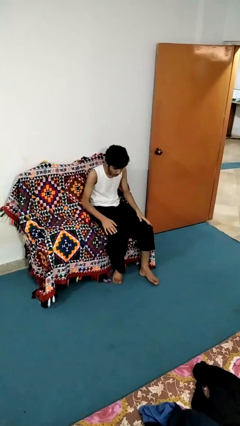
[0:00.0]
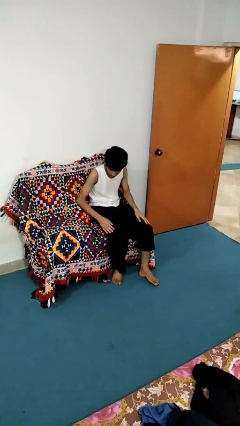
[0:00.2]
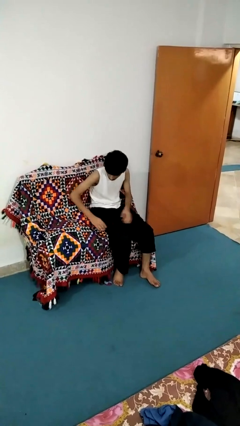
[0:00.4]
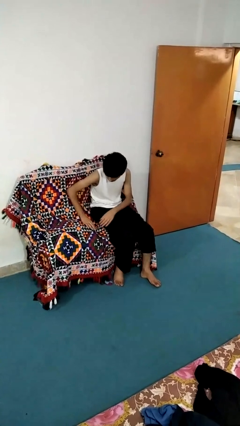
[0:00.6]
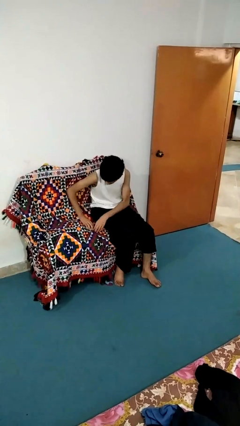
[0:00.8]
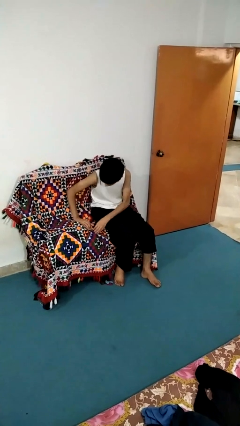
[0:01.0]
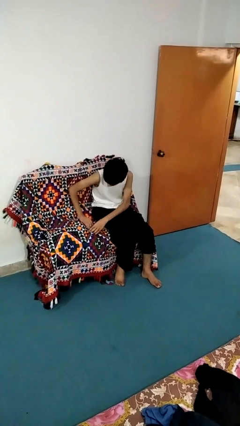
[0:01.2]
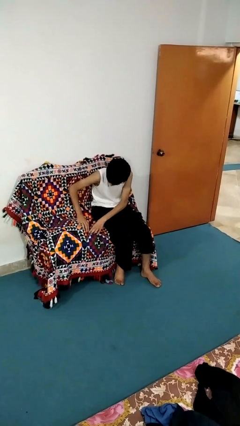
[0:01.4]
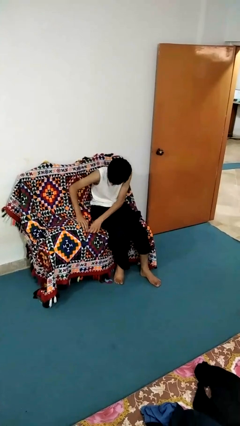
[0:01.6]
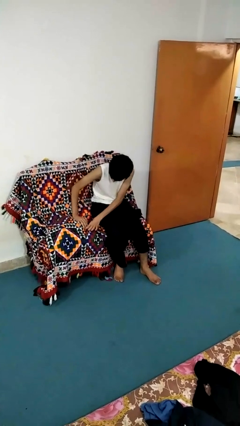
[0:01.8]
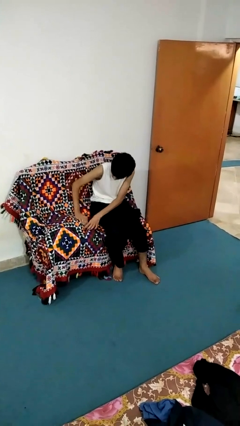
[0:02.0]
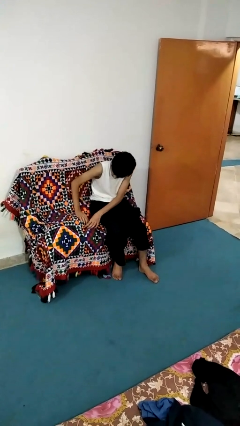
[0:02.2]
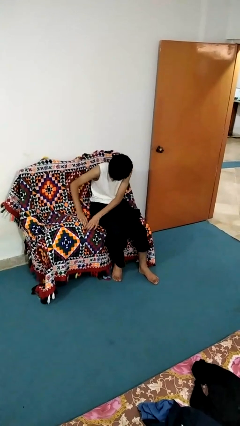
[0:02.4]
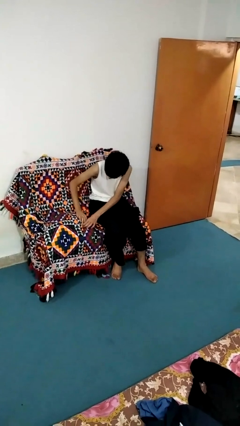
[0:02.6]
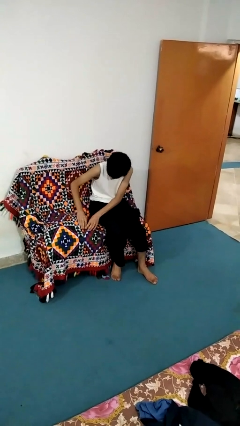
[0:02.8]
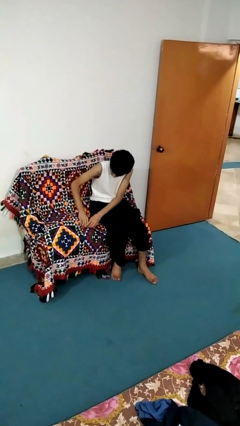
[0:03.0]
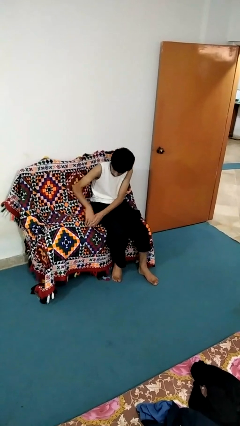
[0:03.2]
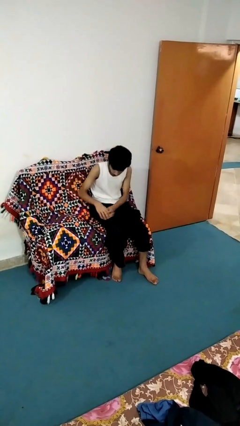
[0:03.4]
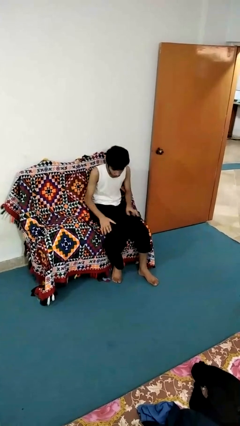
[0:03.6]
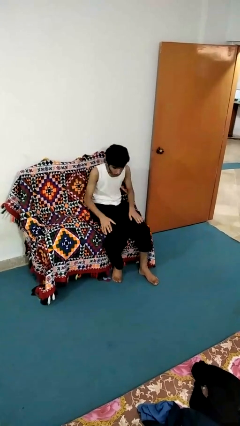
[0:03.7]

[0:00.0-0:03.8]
person searches in couch

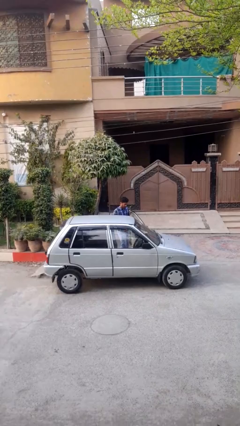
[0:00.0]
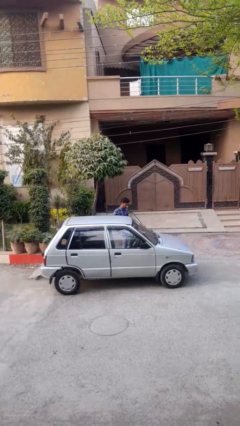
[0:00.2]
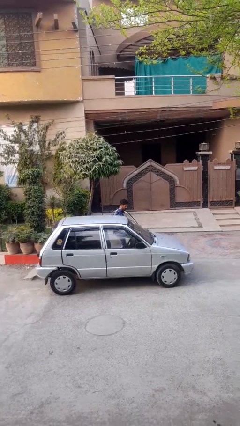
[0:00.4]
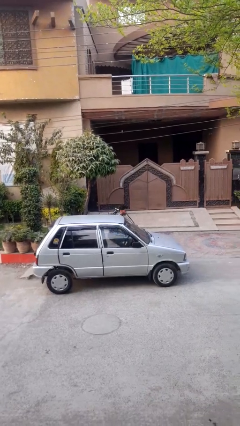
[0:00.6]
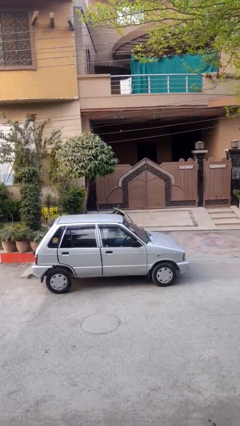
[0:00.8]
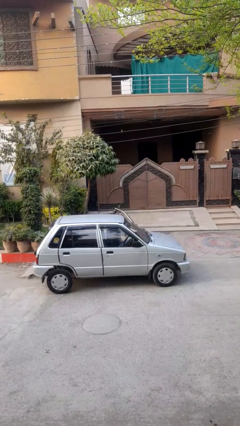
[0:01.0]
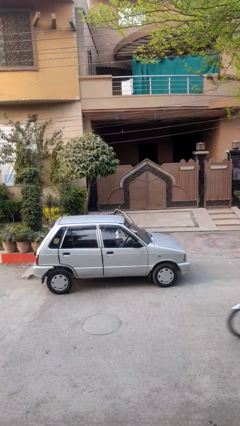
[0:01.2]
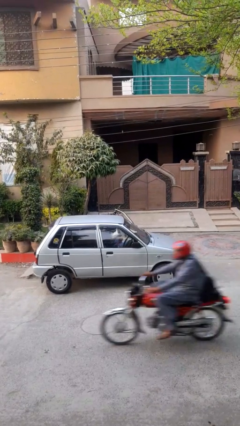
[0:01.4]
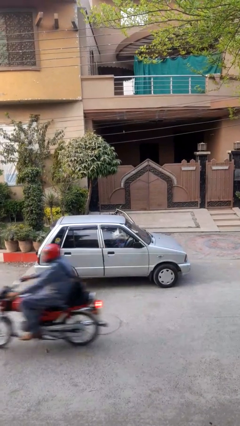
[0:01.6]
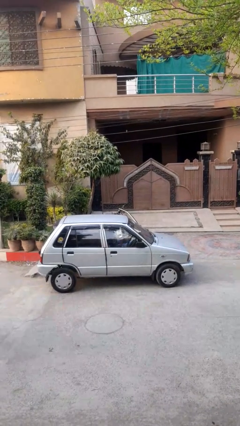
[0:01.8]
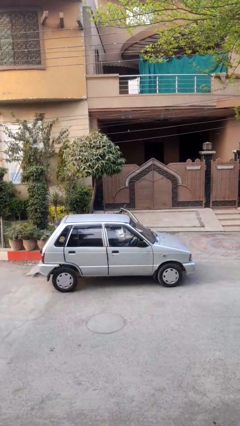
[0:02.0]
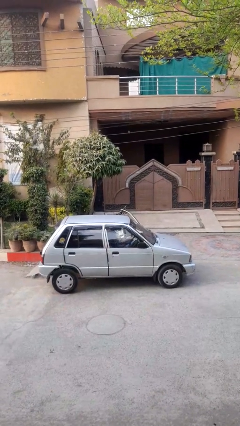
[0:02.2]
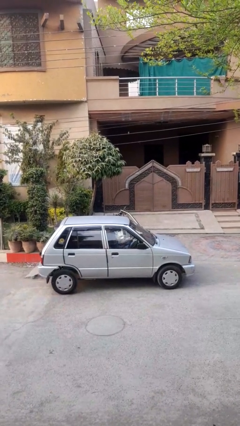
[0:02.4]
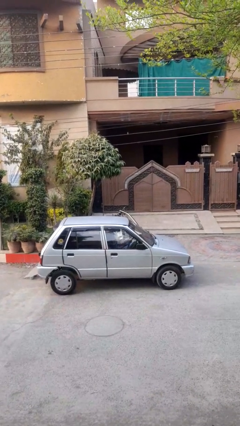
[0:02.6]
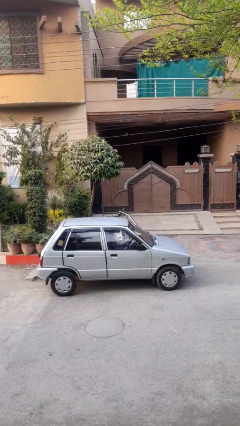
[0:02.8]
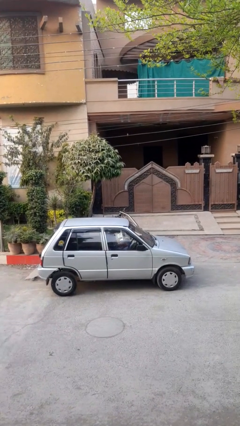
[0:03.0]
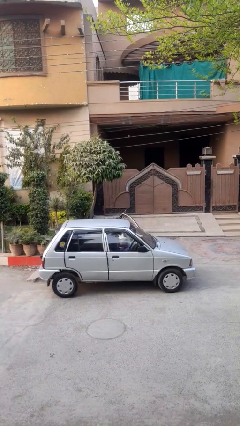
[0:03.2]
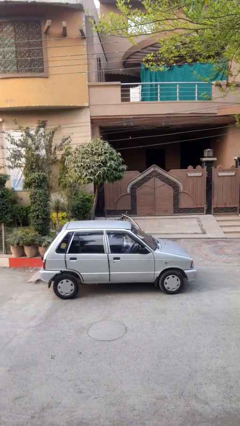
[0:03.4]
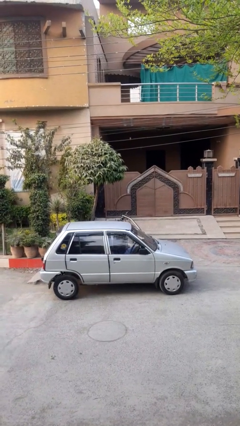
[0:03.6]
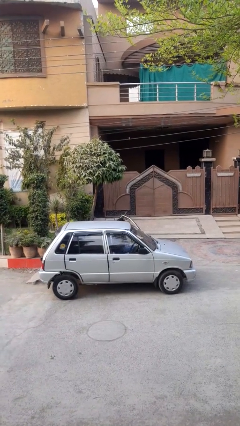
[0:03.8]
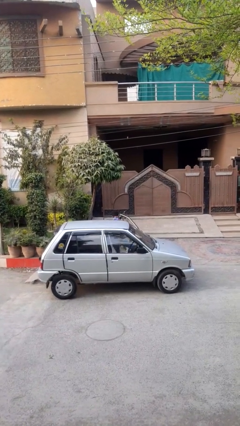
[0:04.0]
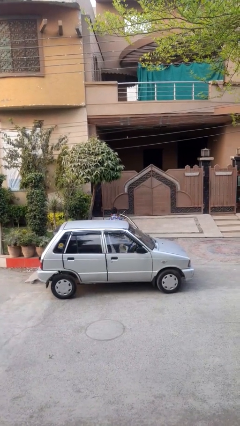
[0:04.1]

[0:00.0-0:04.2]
person enters car

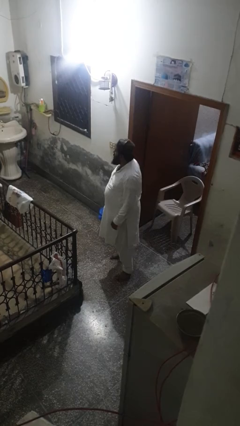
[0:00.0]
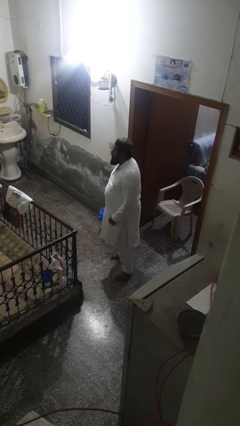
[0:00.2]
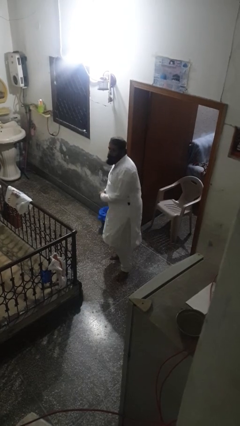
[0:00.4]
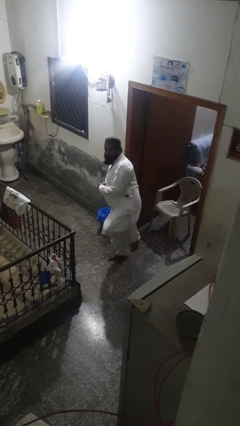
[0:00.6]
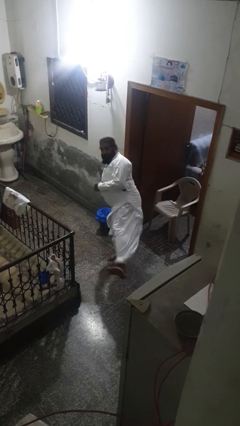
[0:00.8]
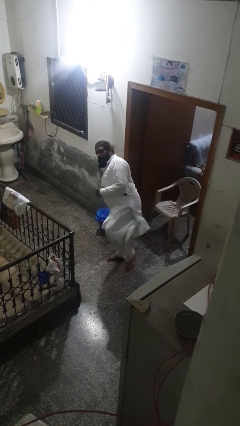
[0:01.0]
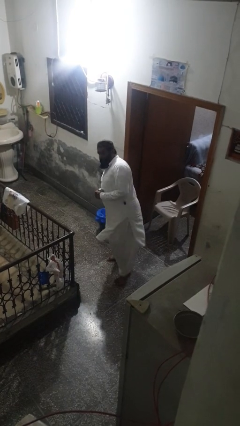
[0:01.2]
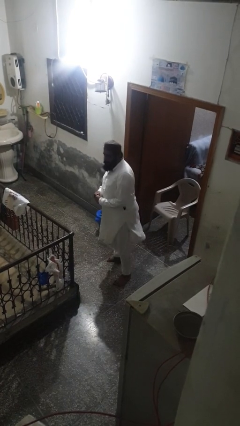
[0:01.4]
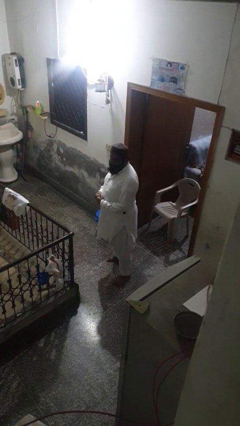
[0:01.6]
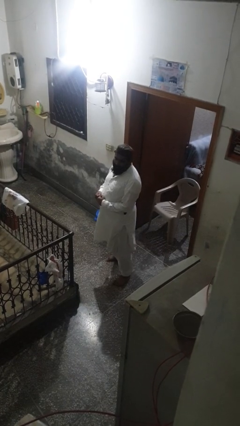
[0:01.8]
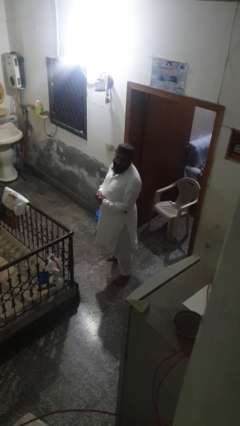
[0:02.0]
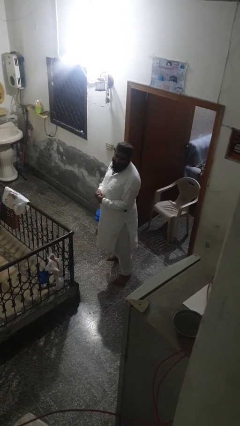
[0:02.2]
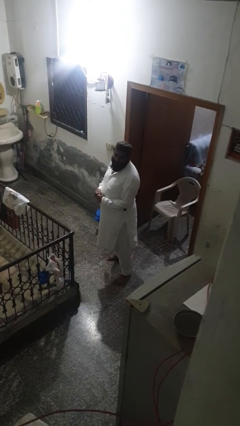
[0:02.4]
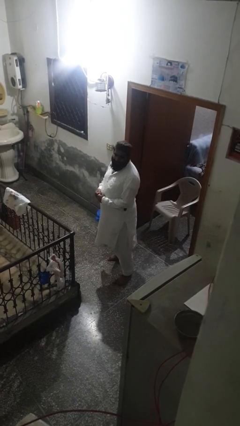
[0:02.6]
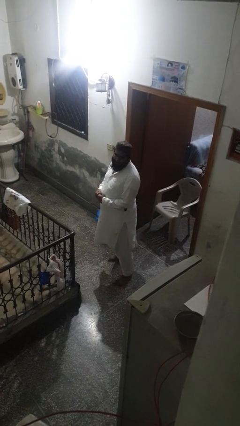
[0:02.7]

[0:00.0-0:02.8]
person karate kicks

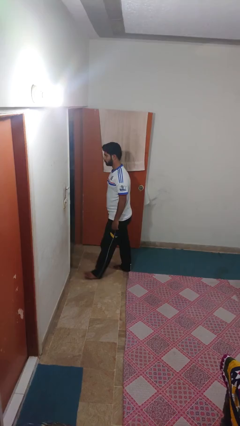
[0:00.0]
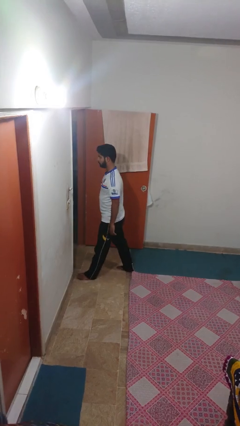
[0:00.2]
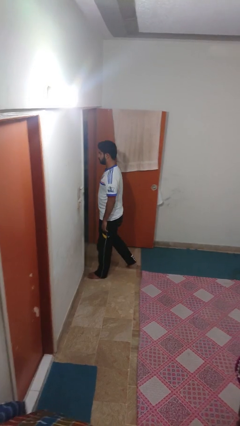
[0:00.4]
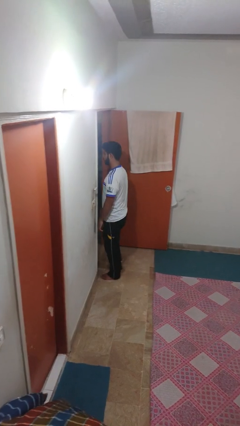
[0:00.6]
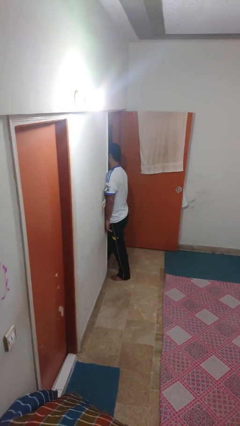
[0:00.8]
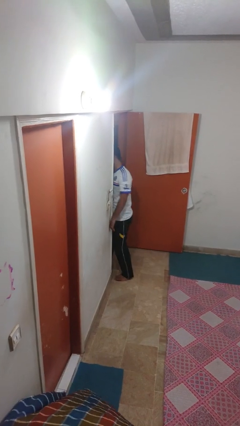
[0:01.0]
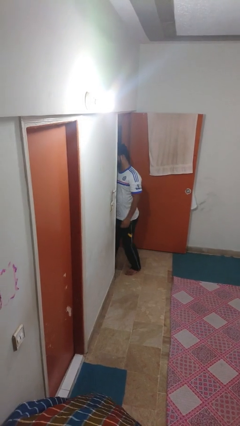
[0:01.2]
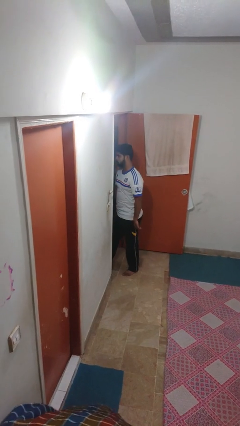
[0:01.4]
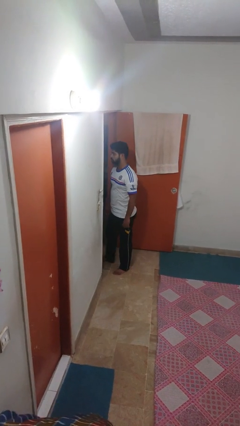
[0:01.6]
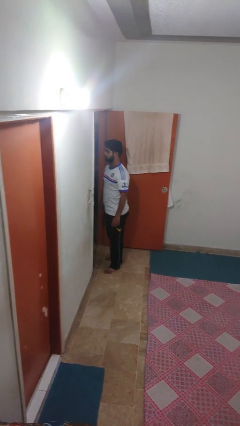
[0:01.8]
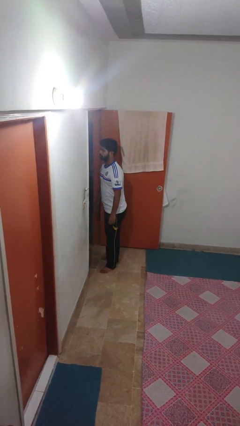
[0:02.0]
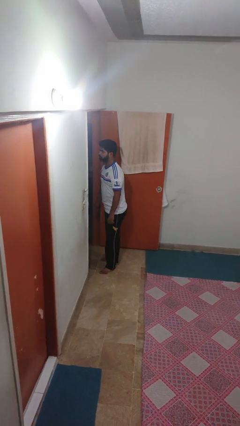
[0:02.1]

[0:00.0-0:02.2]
person bumps into wall

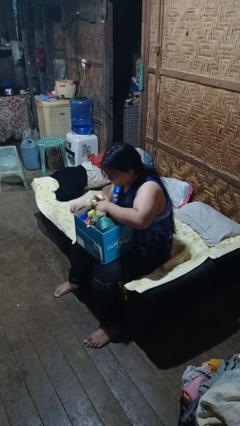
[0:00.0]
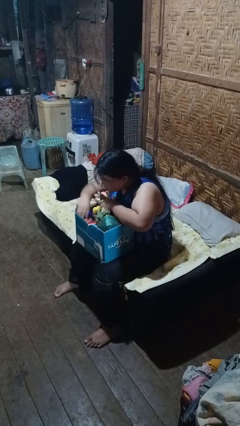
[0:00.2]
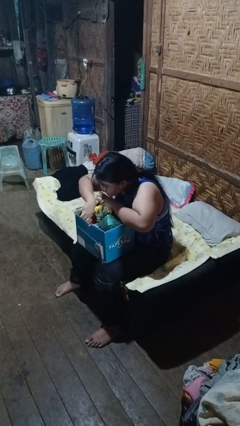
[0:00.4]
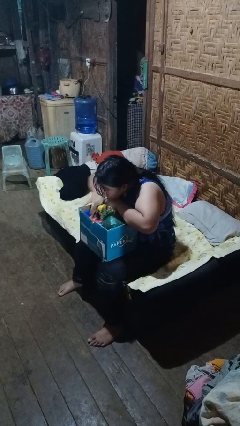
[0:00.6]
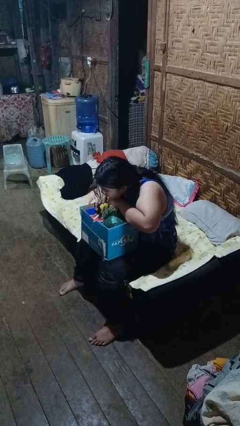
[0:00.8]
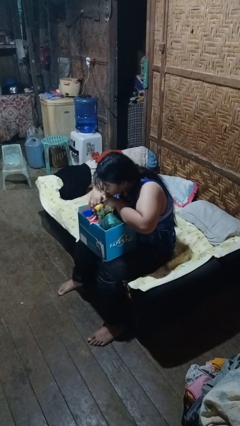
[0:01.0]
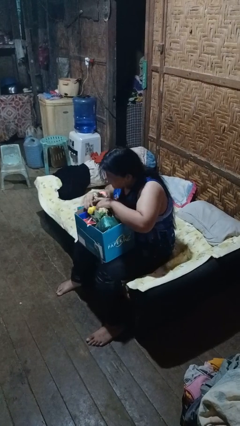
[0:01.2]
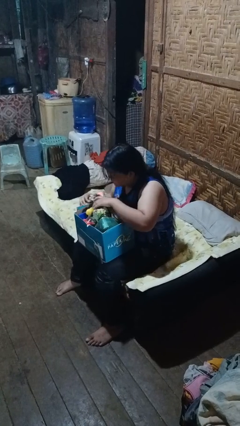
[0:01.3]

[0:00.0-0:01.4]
person searches in box

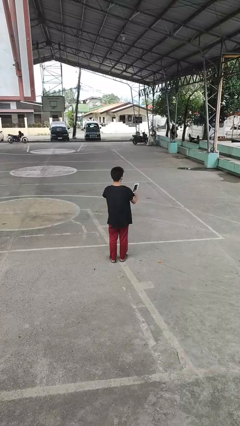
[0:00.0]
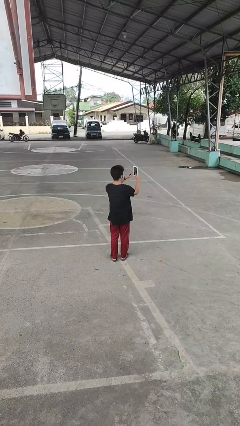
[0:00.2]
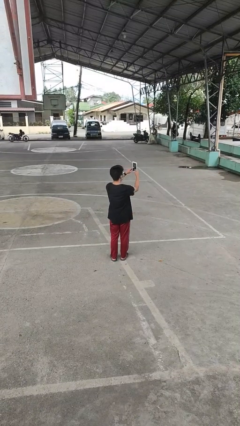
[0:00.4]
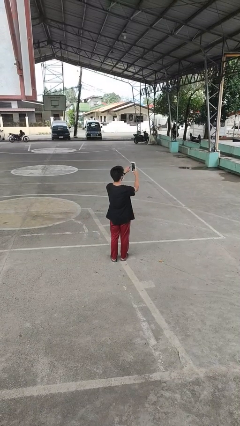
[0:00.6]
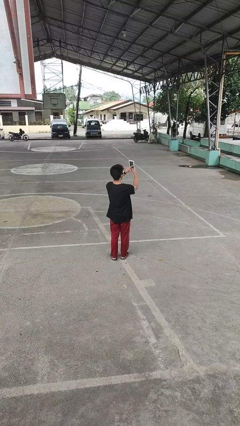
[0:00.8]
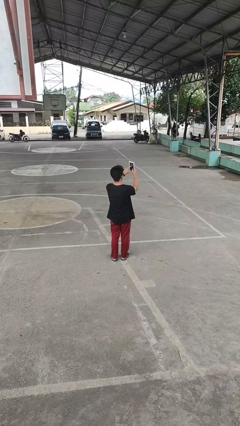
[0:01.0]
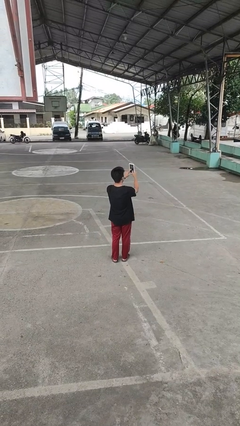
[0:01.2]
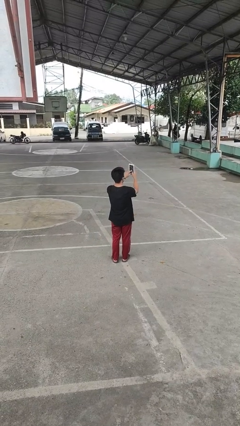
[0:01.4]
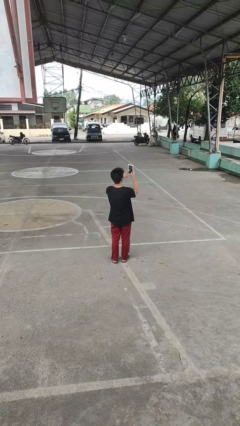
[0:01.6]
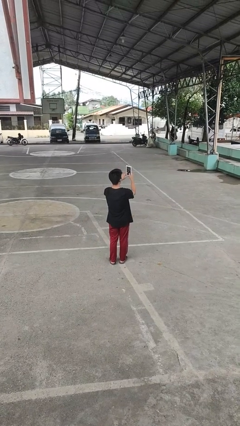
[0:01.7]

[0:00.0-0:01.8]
person interacts with tablet

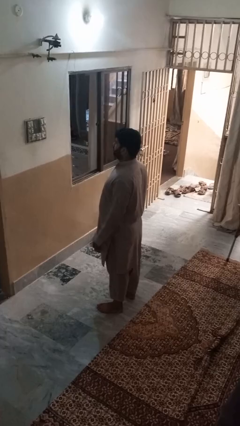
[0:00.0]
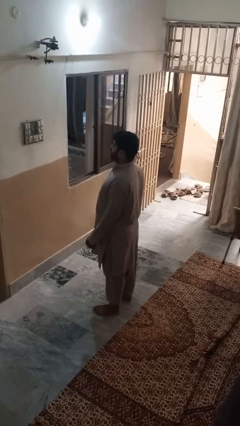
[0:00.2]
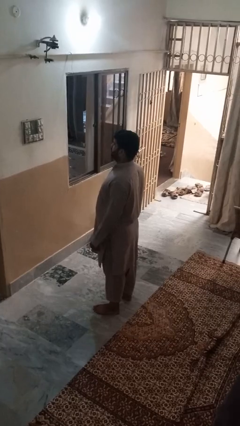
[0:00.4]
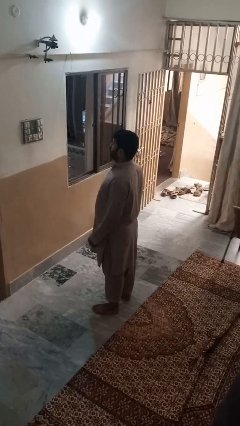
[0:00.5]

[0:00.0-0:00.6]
person buttons shirt

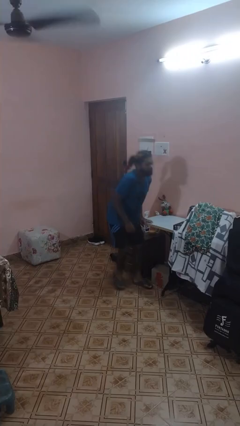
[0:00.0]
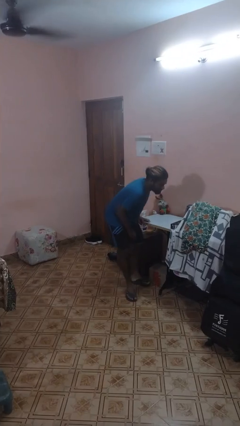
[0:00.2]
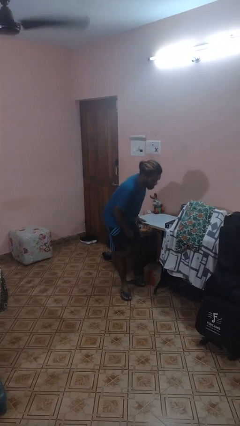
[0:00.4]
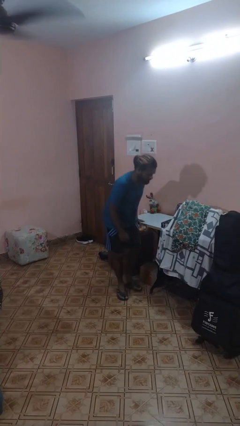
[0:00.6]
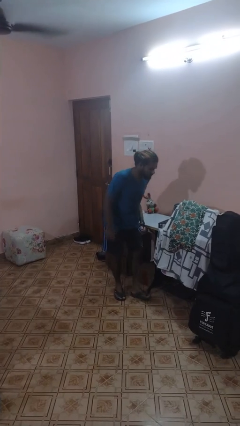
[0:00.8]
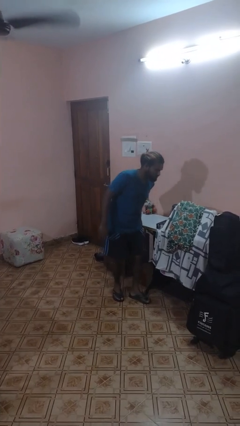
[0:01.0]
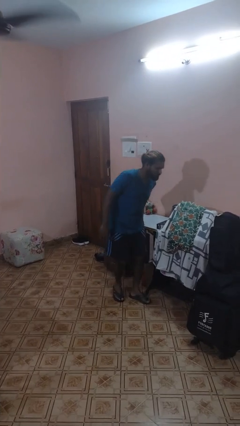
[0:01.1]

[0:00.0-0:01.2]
person bumps into table